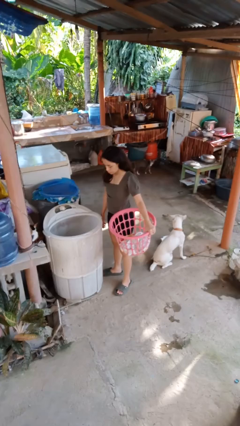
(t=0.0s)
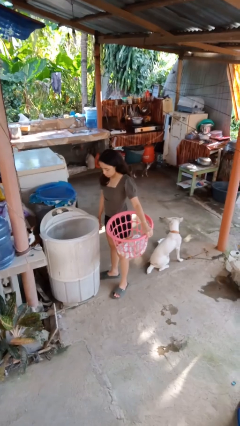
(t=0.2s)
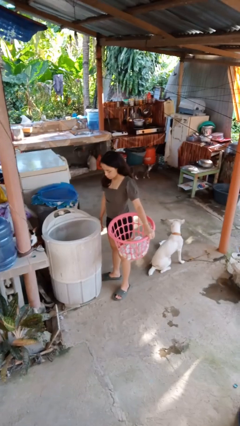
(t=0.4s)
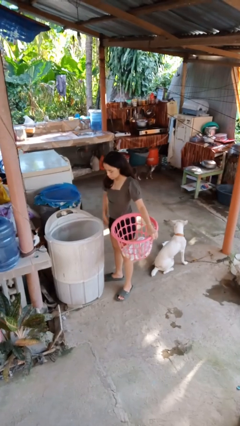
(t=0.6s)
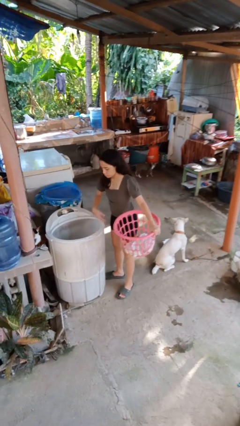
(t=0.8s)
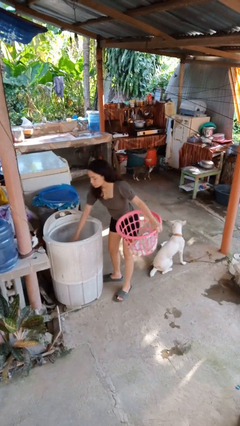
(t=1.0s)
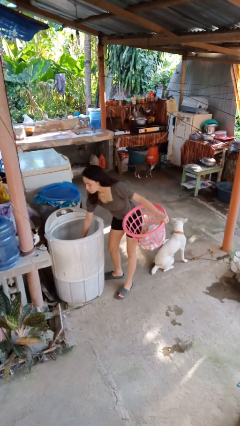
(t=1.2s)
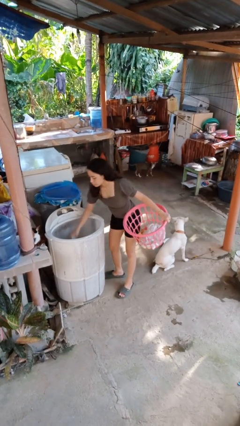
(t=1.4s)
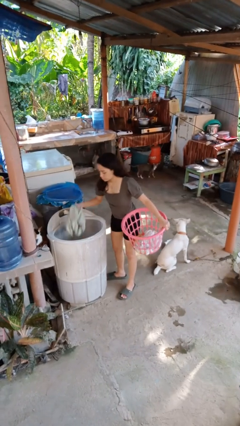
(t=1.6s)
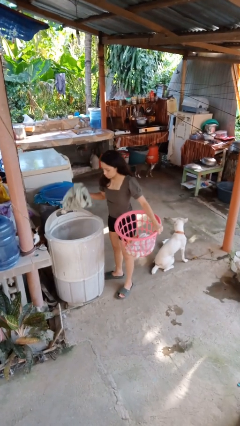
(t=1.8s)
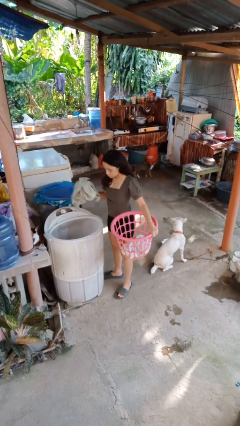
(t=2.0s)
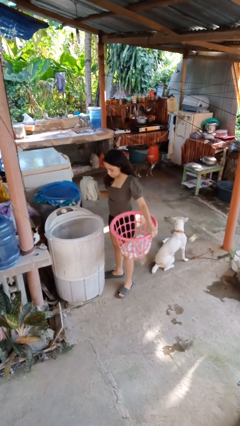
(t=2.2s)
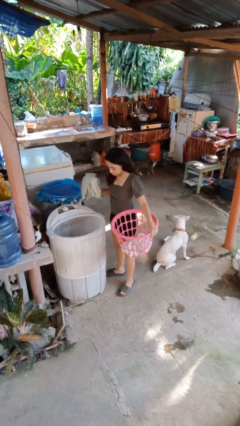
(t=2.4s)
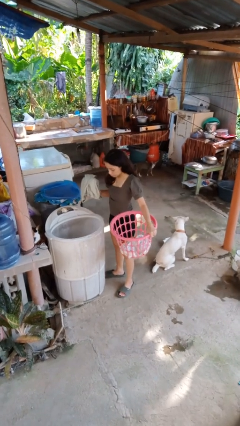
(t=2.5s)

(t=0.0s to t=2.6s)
person unloads dryer

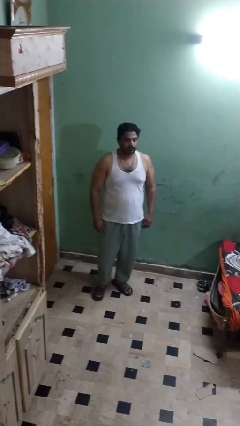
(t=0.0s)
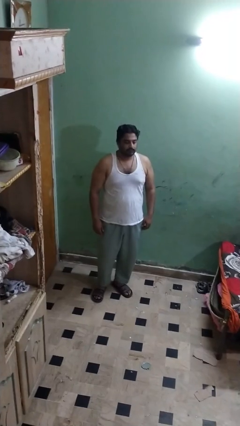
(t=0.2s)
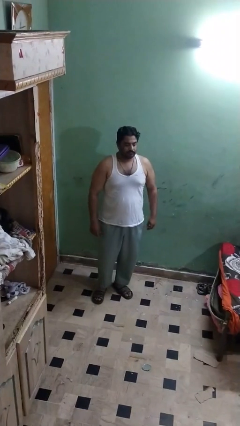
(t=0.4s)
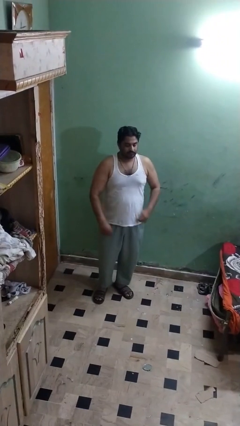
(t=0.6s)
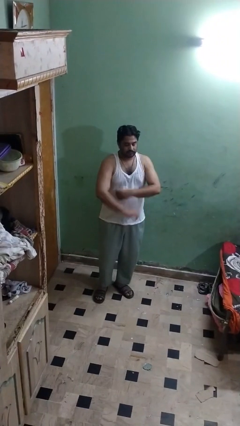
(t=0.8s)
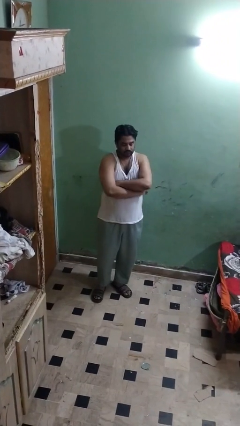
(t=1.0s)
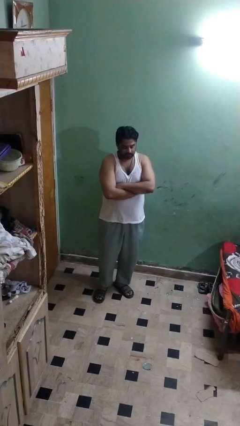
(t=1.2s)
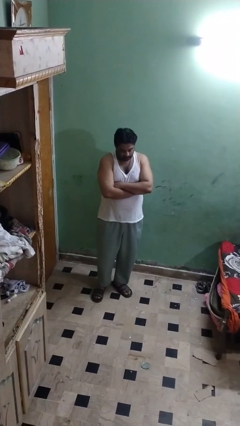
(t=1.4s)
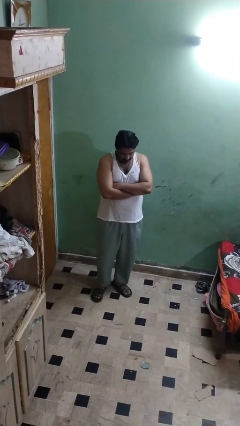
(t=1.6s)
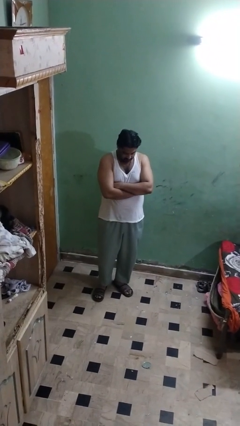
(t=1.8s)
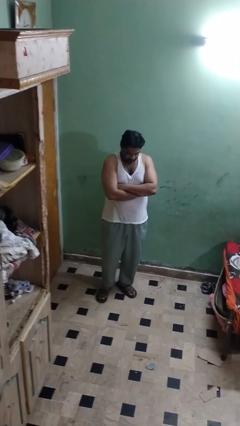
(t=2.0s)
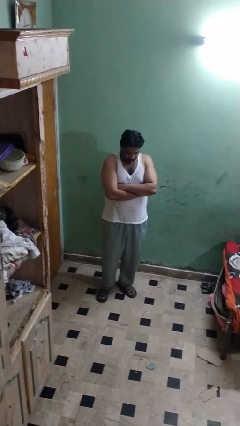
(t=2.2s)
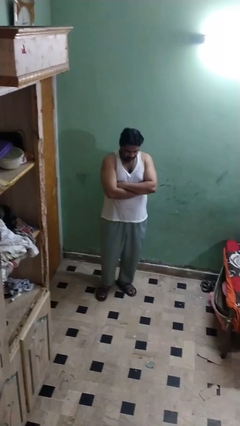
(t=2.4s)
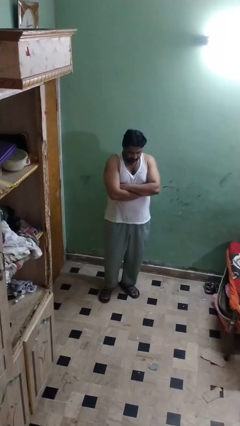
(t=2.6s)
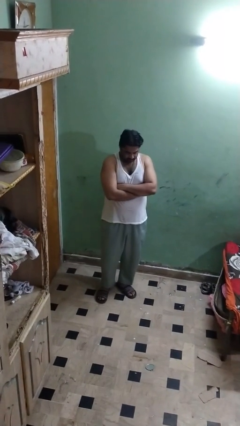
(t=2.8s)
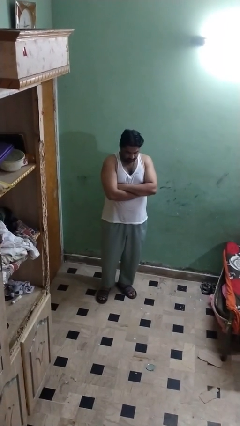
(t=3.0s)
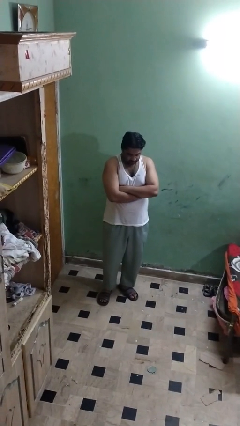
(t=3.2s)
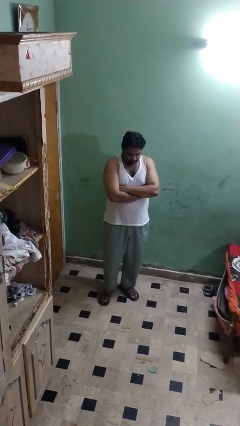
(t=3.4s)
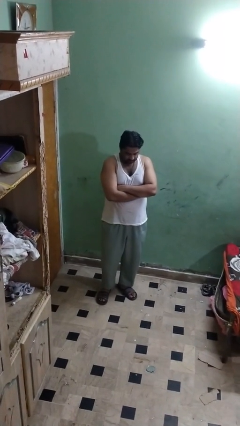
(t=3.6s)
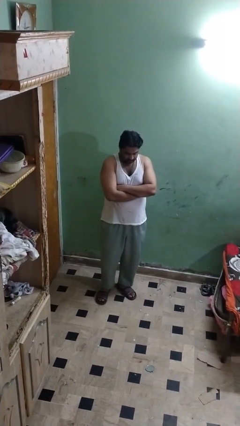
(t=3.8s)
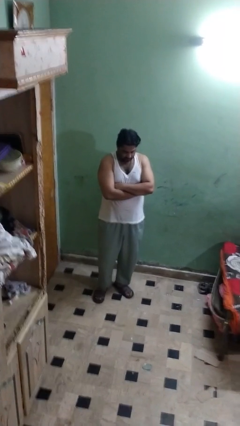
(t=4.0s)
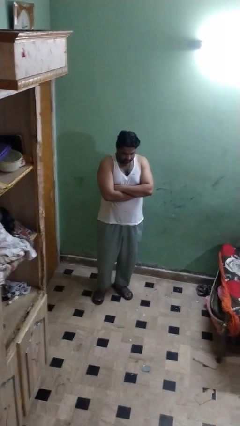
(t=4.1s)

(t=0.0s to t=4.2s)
person crosses arms

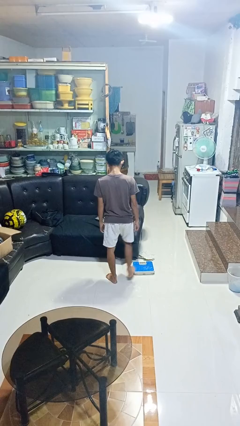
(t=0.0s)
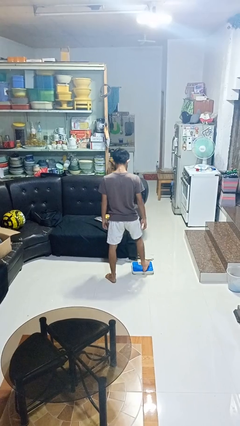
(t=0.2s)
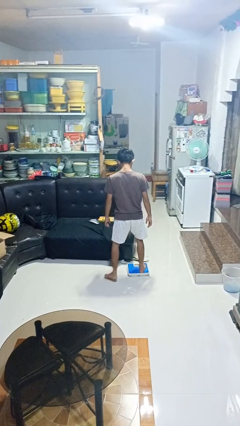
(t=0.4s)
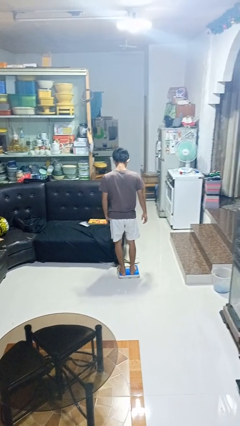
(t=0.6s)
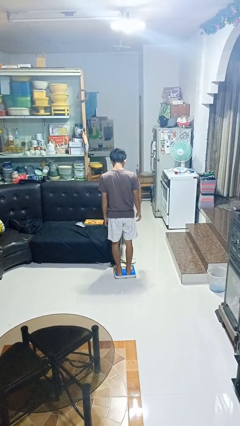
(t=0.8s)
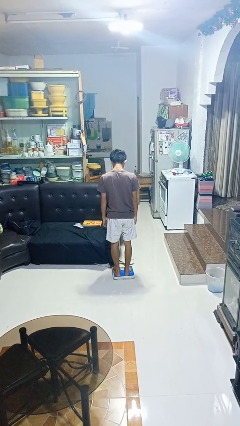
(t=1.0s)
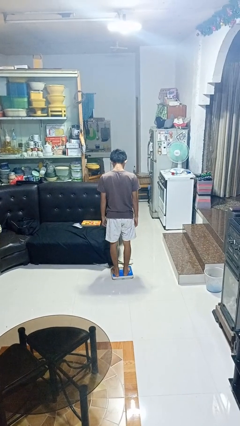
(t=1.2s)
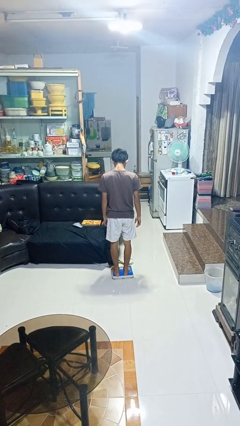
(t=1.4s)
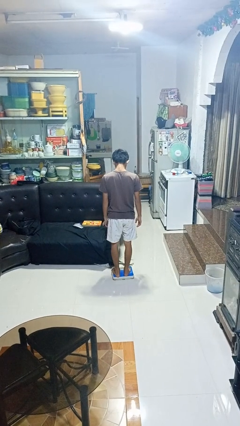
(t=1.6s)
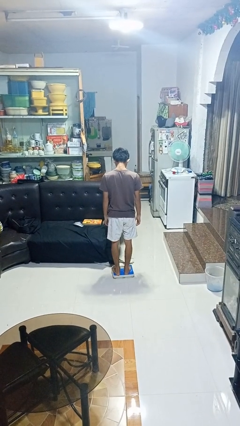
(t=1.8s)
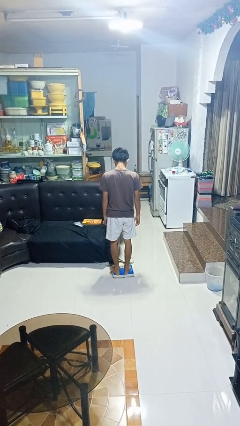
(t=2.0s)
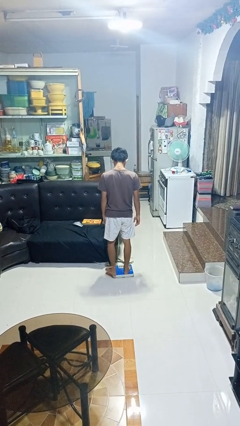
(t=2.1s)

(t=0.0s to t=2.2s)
person uses bodyweight scale

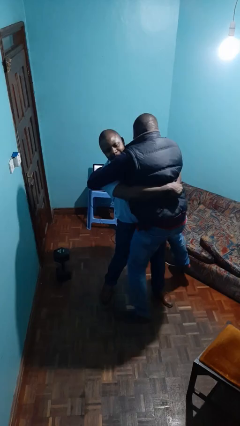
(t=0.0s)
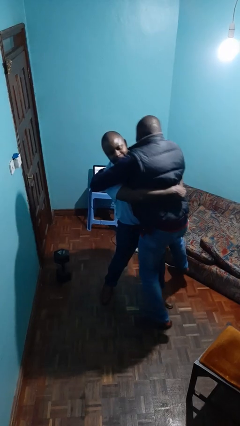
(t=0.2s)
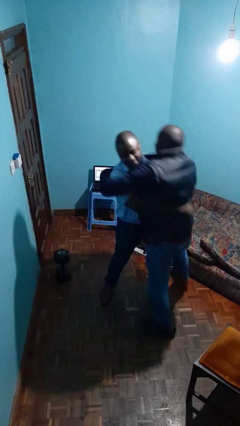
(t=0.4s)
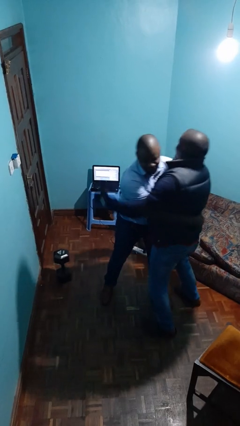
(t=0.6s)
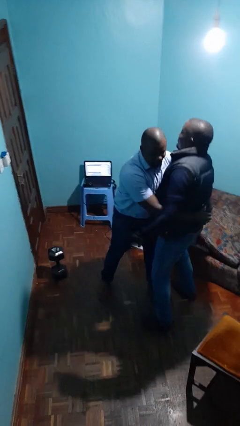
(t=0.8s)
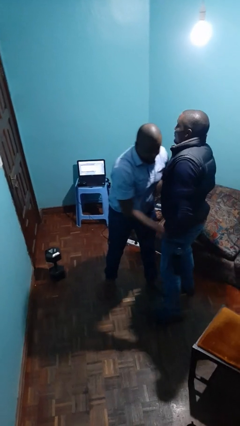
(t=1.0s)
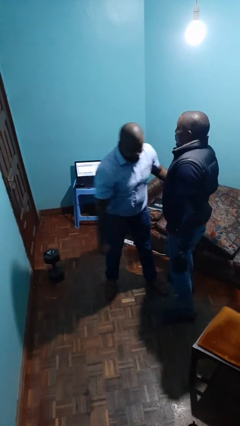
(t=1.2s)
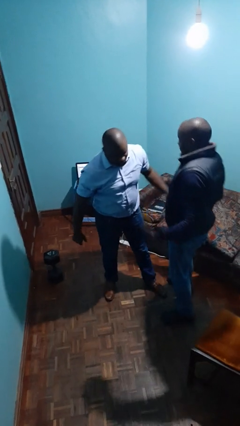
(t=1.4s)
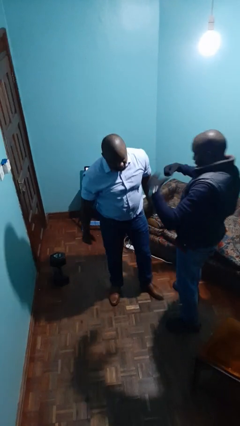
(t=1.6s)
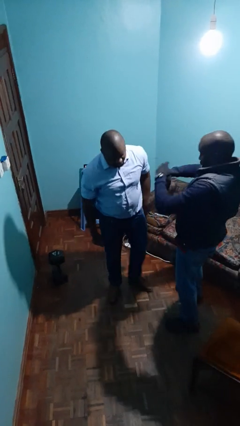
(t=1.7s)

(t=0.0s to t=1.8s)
person puts down person

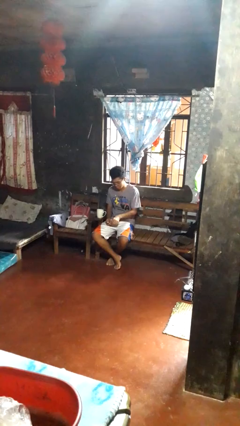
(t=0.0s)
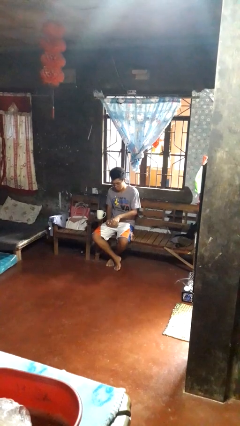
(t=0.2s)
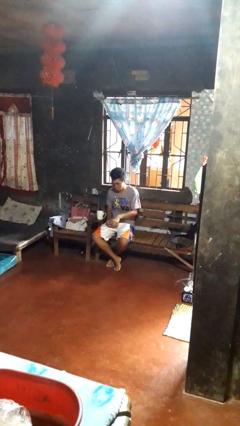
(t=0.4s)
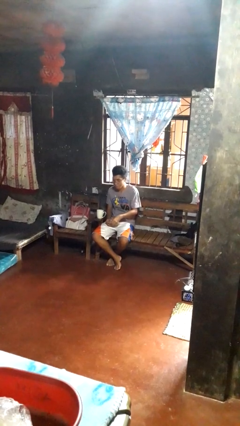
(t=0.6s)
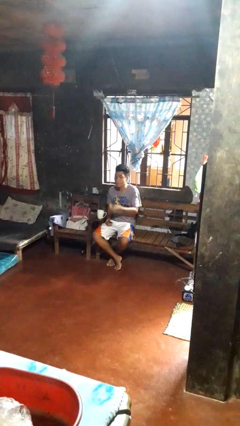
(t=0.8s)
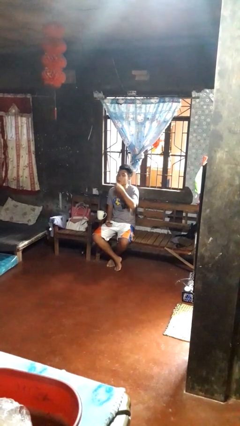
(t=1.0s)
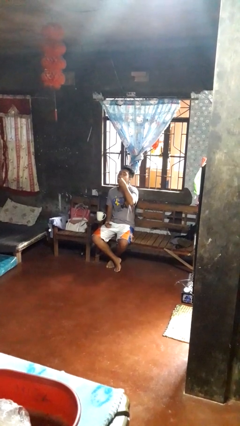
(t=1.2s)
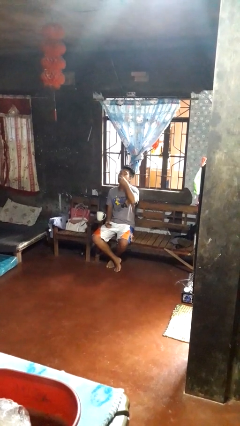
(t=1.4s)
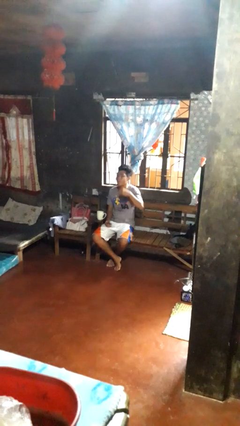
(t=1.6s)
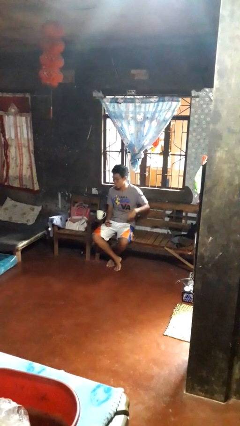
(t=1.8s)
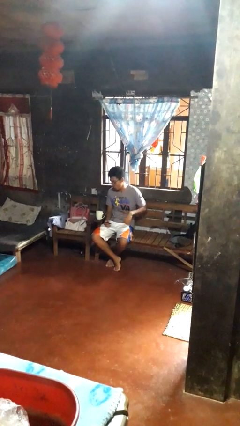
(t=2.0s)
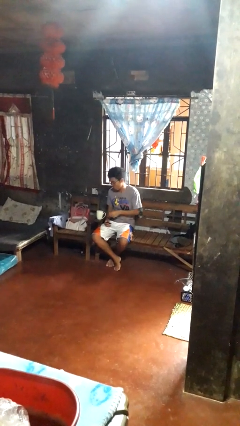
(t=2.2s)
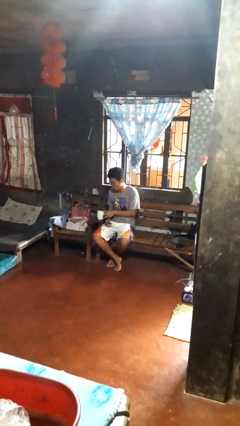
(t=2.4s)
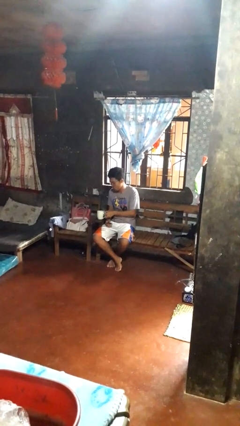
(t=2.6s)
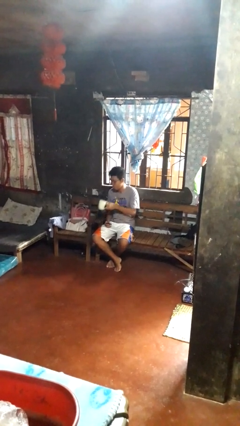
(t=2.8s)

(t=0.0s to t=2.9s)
person takes medicine pills

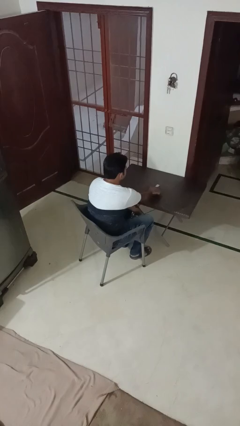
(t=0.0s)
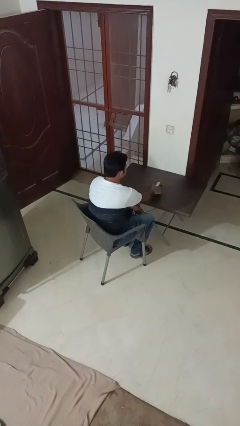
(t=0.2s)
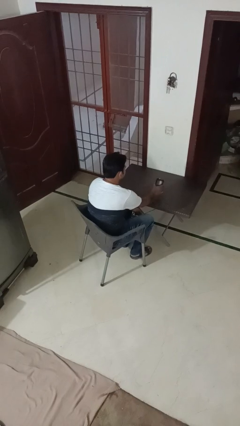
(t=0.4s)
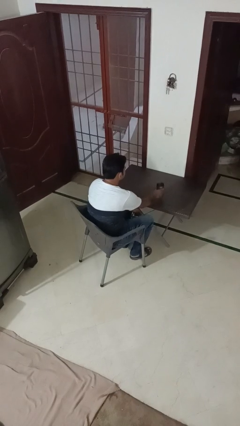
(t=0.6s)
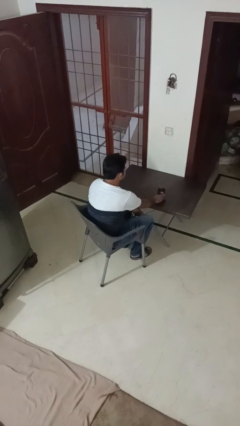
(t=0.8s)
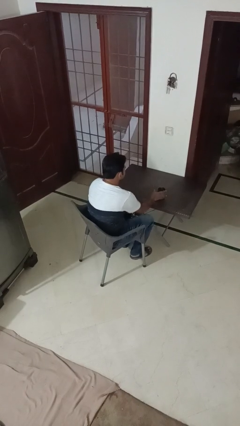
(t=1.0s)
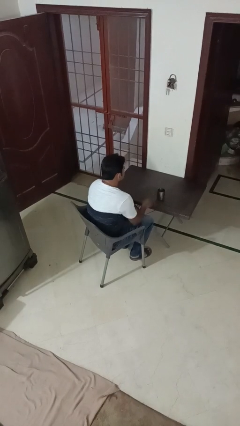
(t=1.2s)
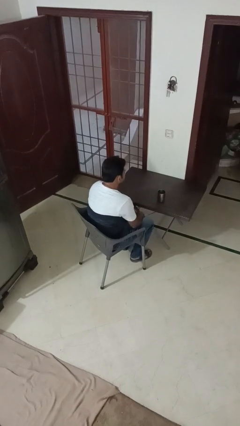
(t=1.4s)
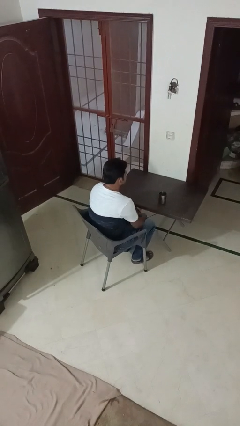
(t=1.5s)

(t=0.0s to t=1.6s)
person sets upright glass

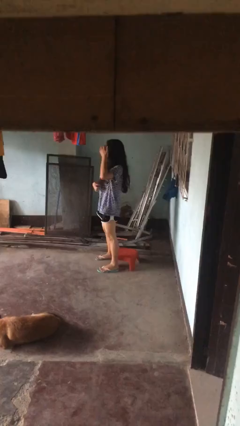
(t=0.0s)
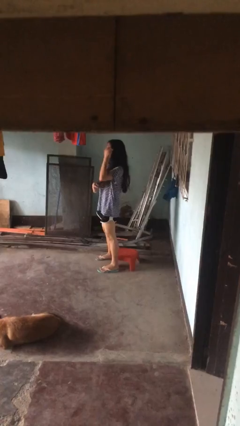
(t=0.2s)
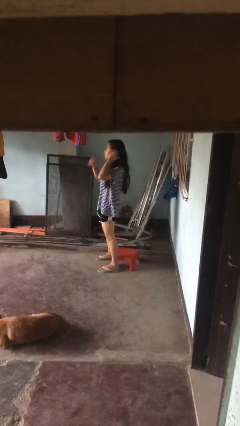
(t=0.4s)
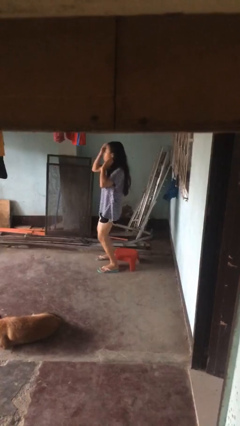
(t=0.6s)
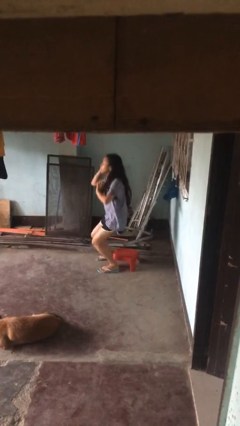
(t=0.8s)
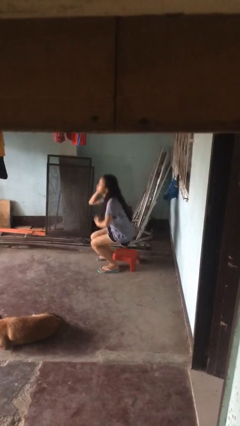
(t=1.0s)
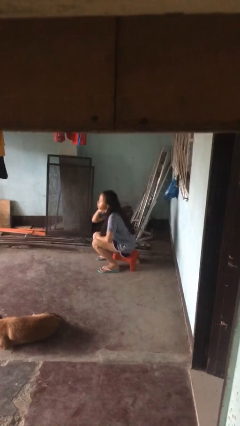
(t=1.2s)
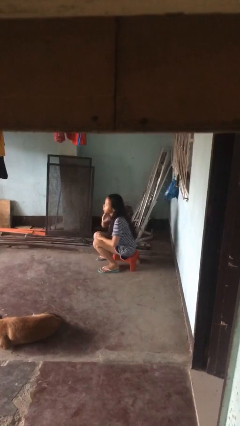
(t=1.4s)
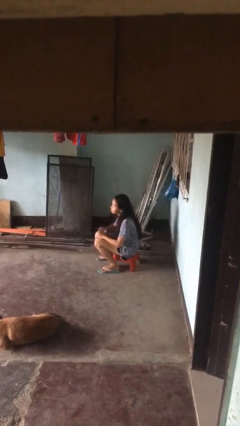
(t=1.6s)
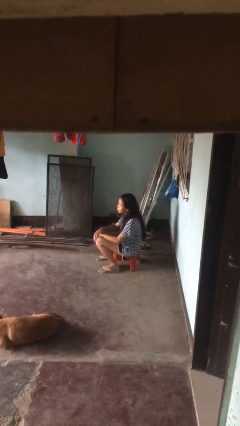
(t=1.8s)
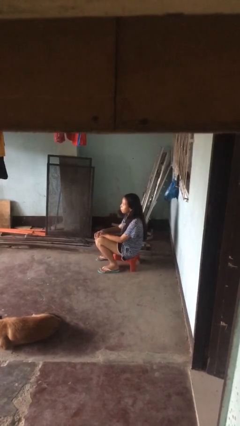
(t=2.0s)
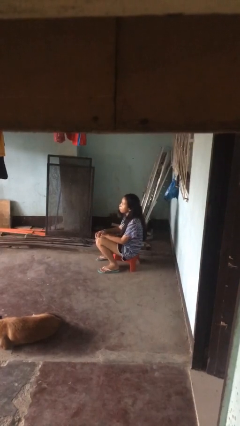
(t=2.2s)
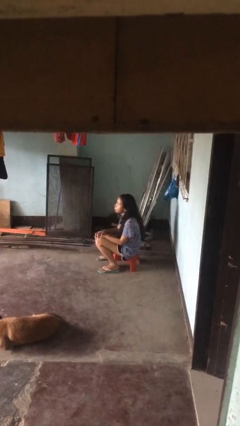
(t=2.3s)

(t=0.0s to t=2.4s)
person sits down
